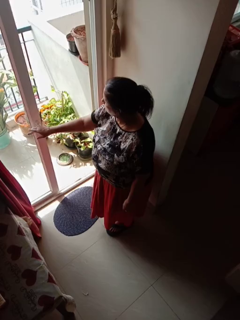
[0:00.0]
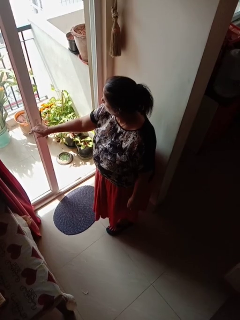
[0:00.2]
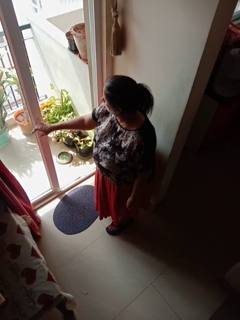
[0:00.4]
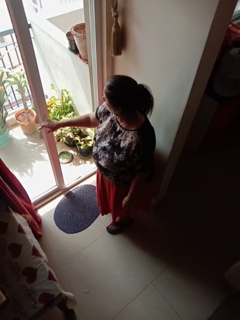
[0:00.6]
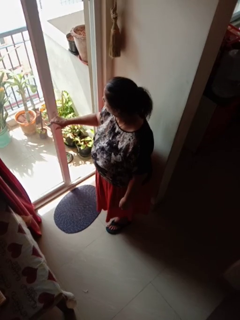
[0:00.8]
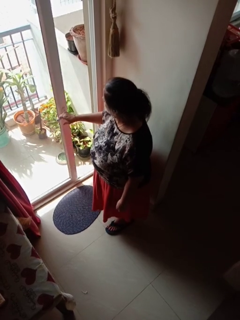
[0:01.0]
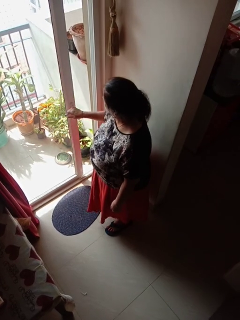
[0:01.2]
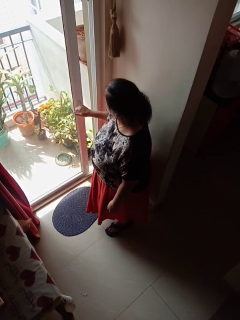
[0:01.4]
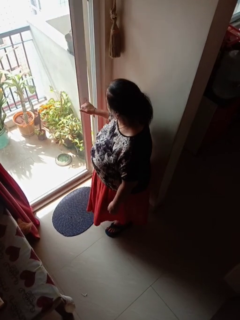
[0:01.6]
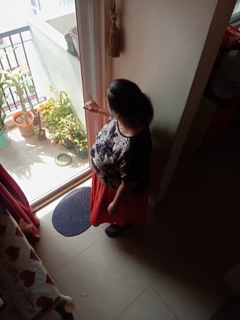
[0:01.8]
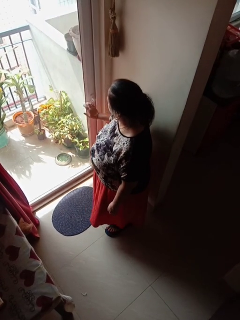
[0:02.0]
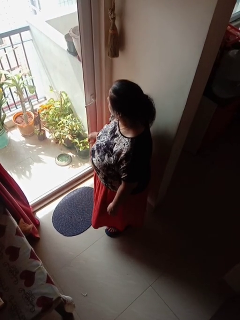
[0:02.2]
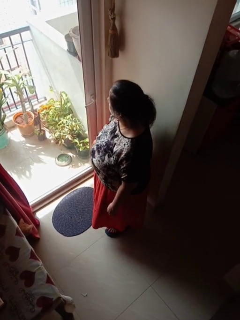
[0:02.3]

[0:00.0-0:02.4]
person closes sliding door

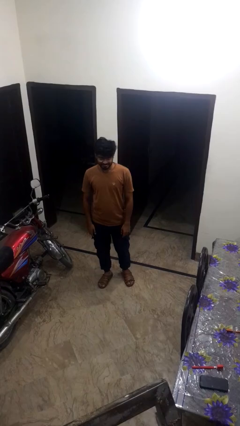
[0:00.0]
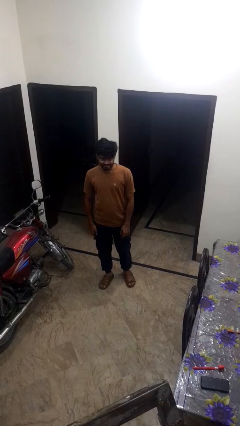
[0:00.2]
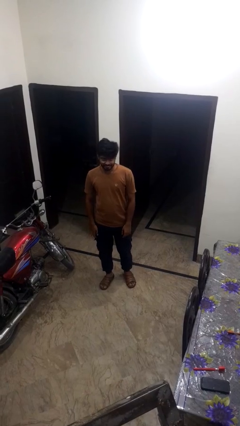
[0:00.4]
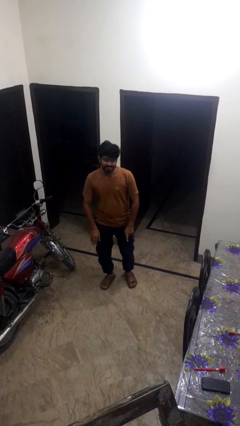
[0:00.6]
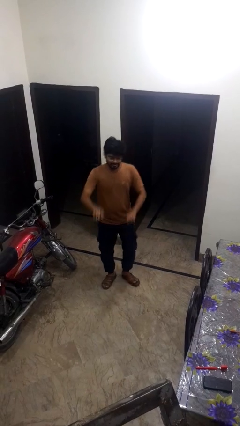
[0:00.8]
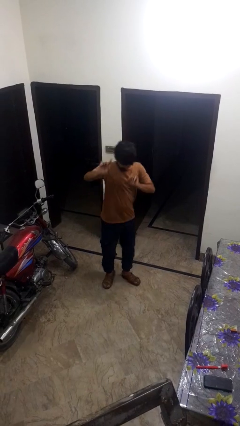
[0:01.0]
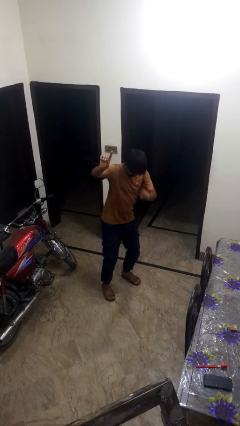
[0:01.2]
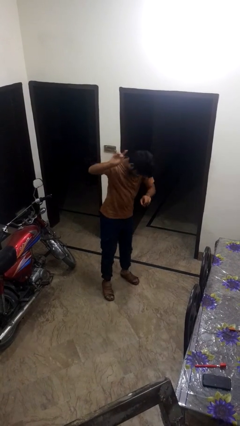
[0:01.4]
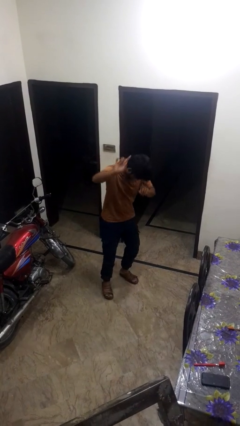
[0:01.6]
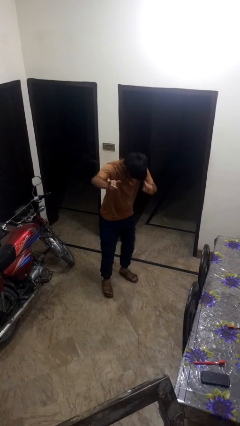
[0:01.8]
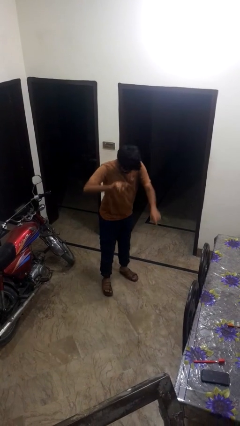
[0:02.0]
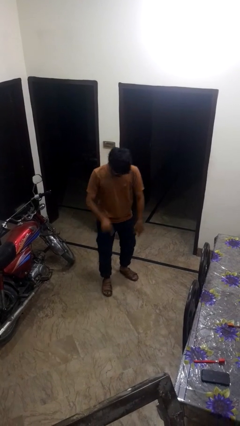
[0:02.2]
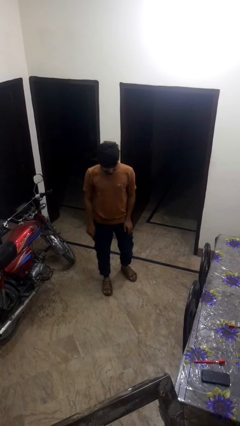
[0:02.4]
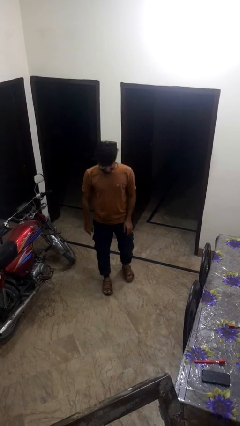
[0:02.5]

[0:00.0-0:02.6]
person dances in place

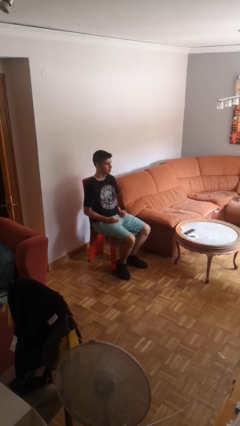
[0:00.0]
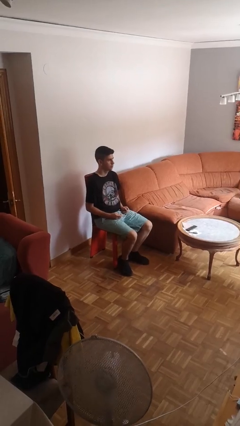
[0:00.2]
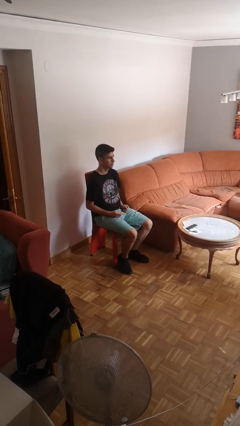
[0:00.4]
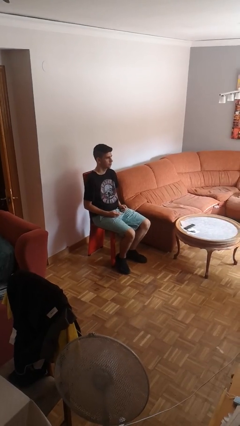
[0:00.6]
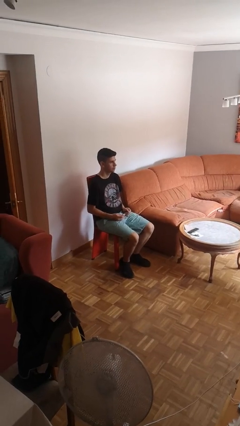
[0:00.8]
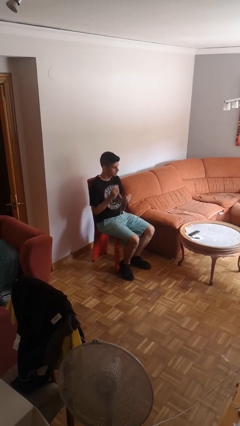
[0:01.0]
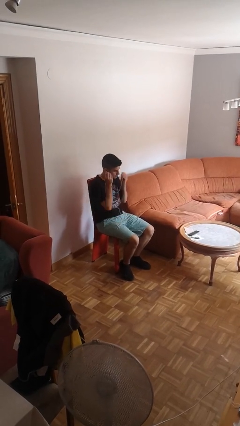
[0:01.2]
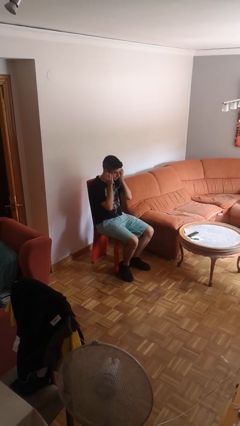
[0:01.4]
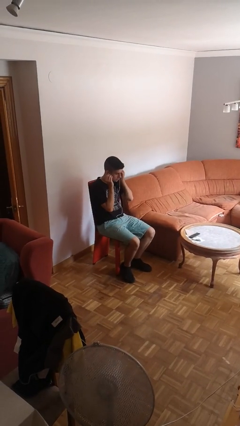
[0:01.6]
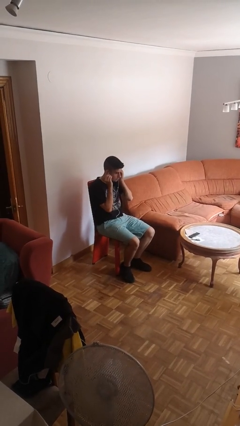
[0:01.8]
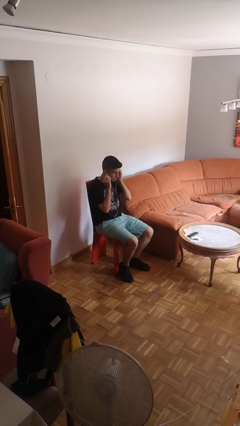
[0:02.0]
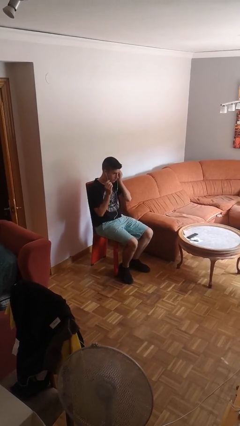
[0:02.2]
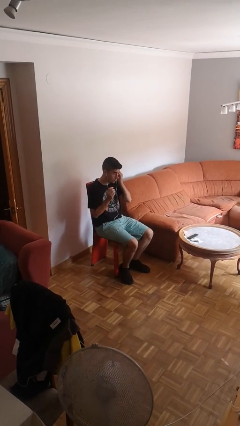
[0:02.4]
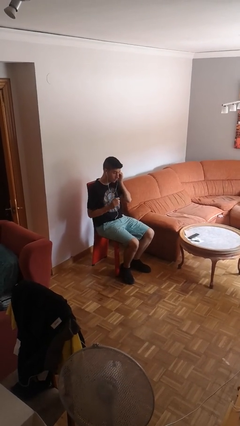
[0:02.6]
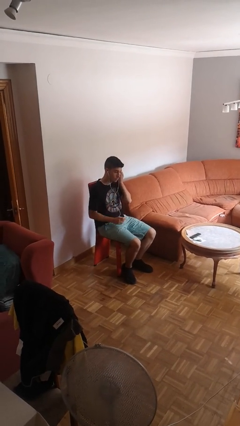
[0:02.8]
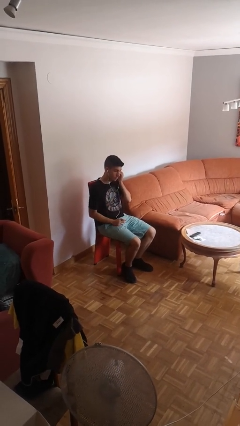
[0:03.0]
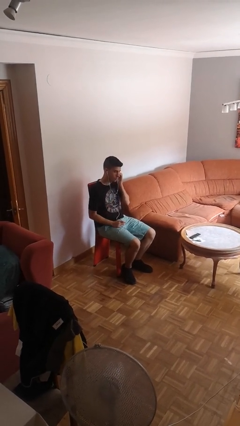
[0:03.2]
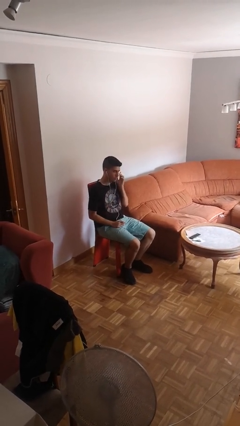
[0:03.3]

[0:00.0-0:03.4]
person puts on headphones

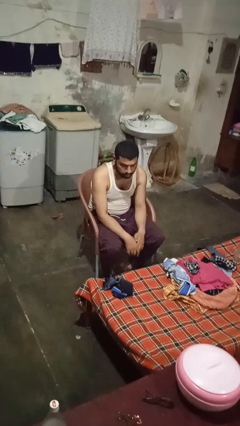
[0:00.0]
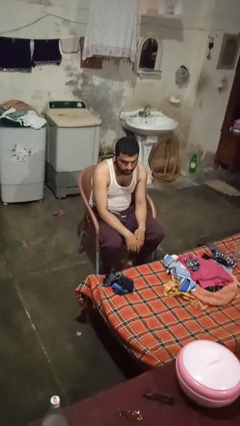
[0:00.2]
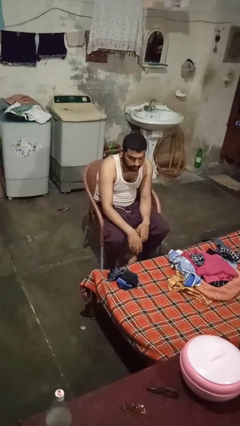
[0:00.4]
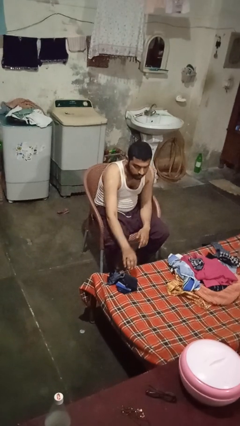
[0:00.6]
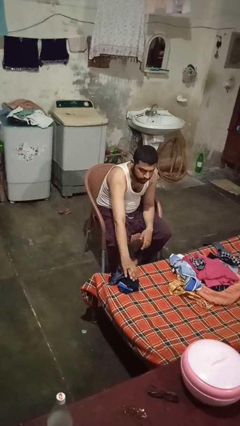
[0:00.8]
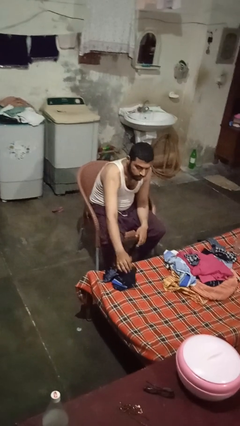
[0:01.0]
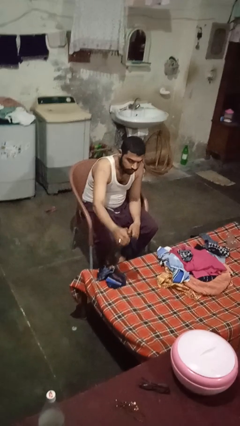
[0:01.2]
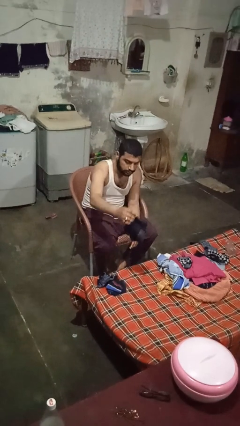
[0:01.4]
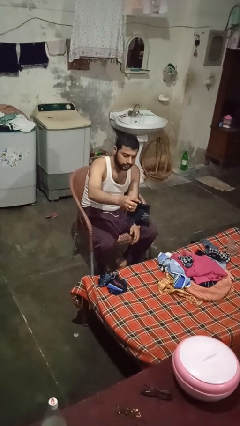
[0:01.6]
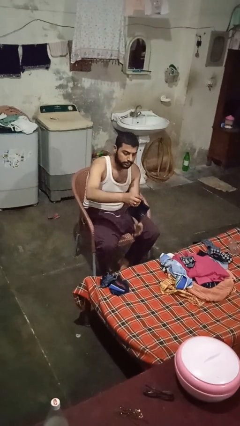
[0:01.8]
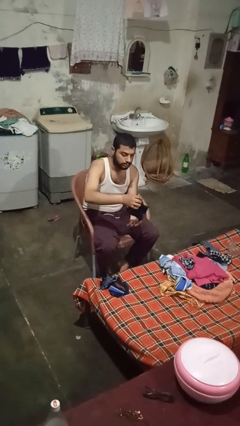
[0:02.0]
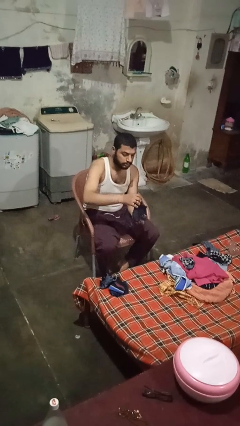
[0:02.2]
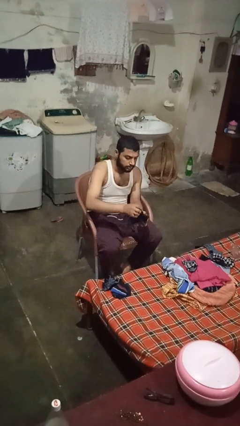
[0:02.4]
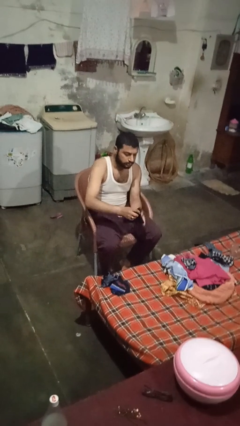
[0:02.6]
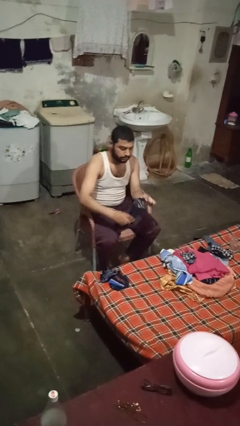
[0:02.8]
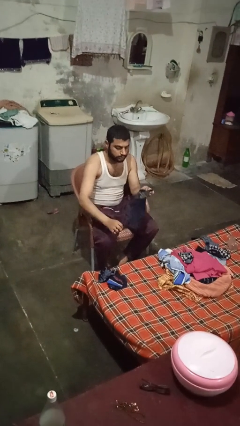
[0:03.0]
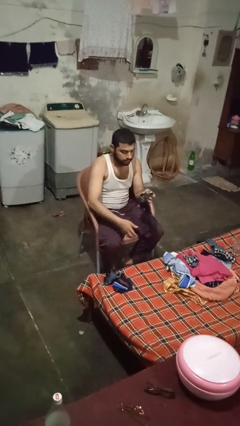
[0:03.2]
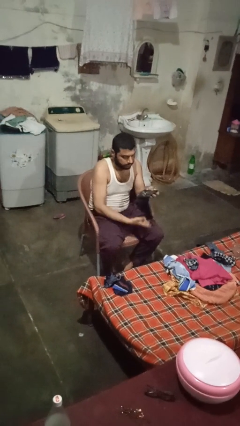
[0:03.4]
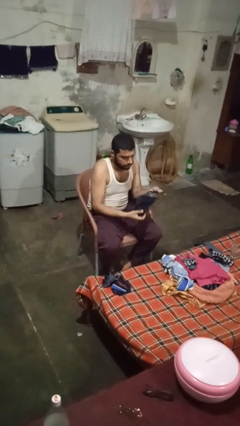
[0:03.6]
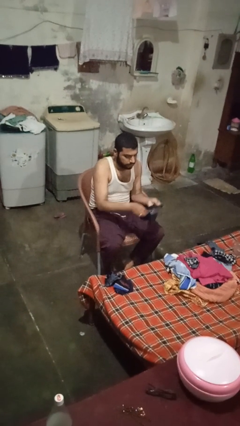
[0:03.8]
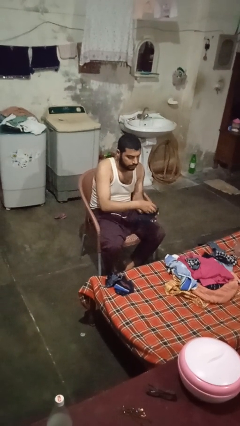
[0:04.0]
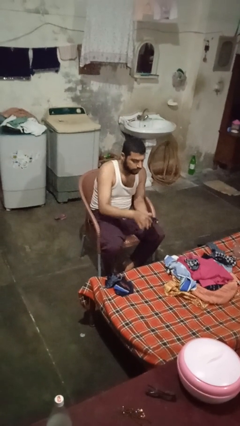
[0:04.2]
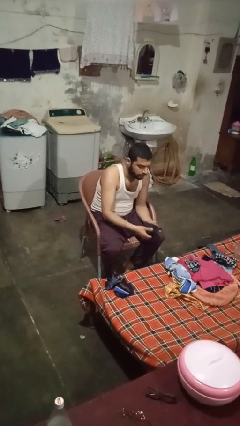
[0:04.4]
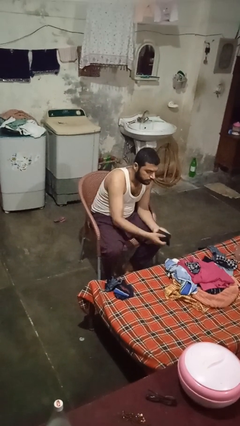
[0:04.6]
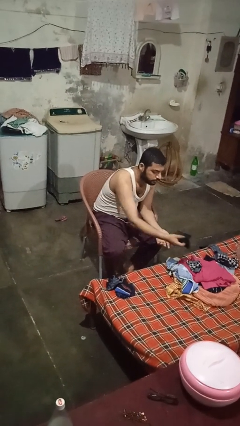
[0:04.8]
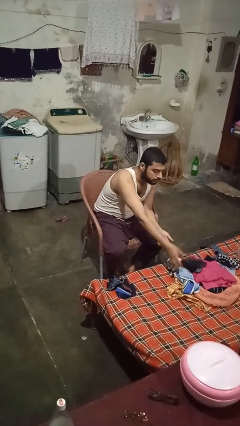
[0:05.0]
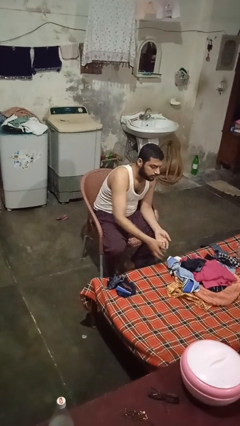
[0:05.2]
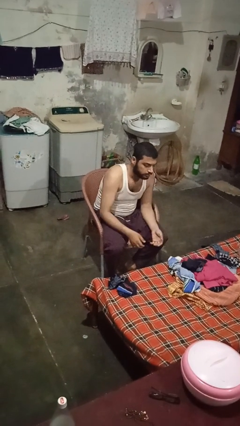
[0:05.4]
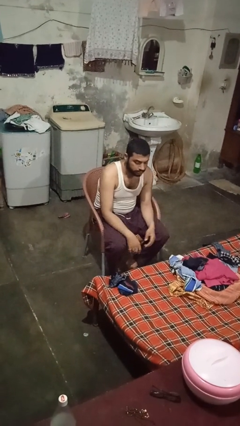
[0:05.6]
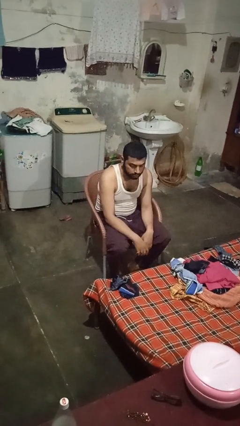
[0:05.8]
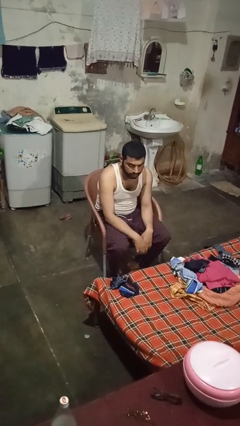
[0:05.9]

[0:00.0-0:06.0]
person folds socks

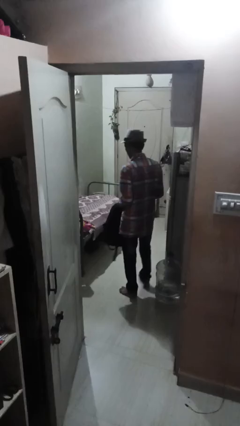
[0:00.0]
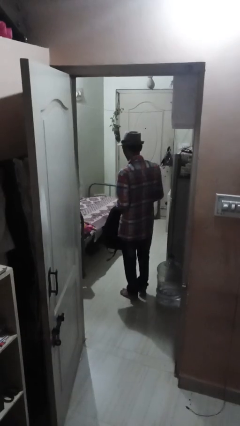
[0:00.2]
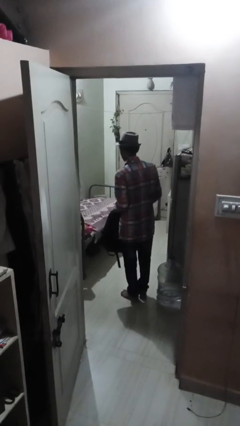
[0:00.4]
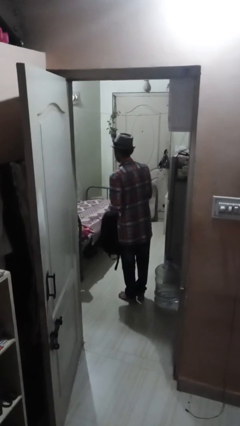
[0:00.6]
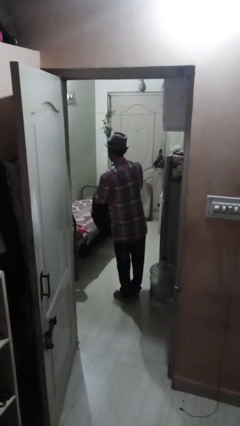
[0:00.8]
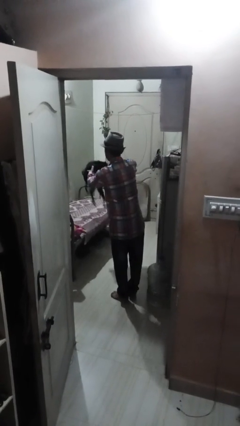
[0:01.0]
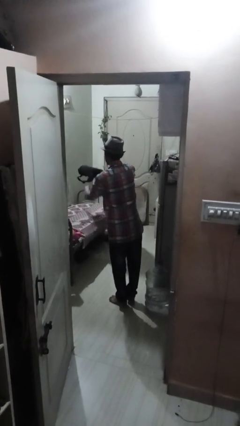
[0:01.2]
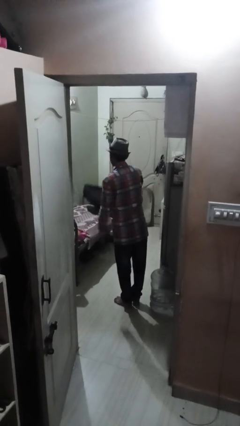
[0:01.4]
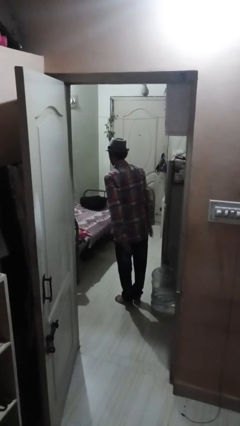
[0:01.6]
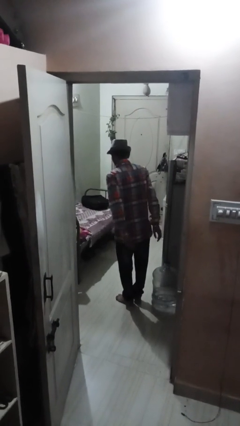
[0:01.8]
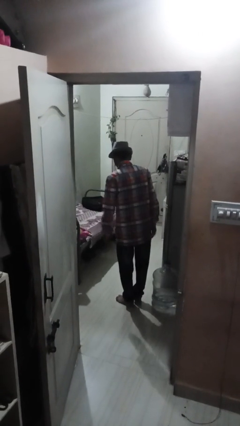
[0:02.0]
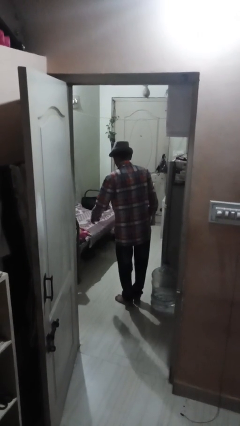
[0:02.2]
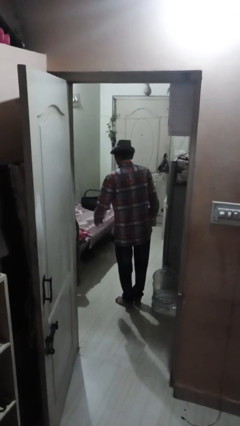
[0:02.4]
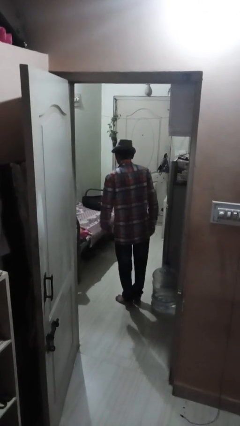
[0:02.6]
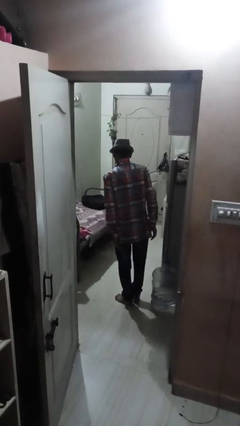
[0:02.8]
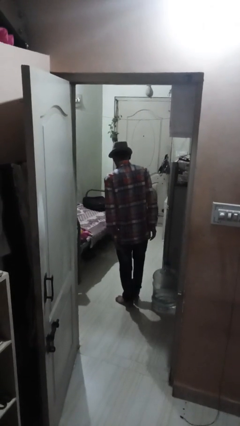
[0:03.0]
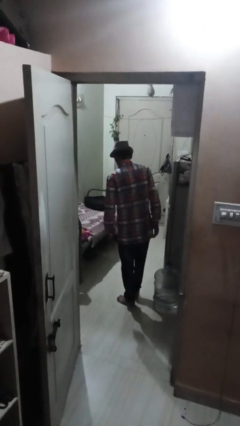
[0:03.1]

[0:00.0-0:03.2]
person throws object on bed

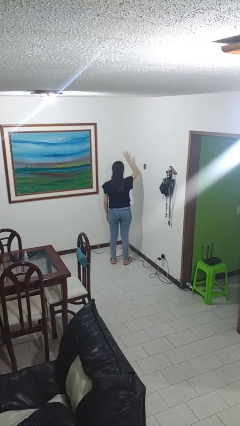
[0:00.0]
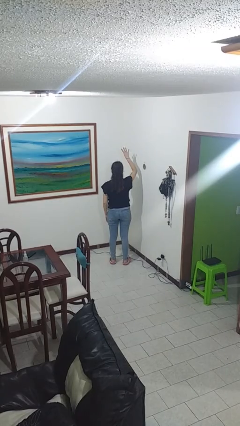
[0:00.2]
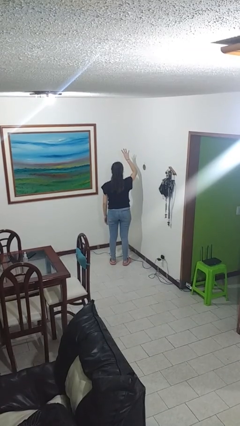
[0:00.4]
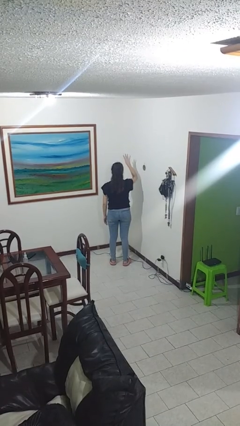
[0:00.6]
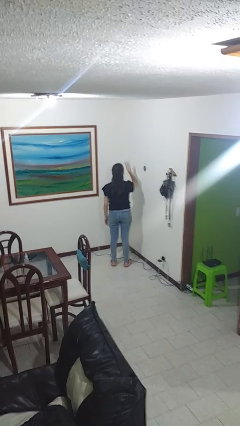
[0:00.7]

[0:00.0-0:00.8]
person gestures number four
